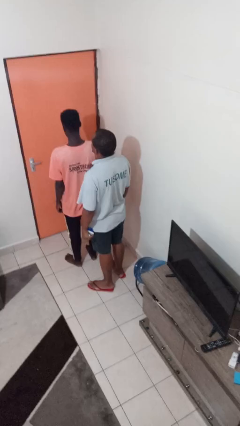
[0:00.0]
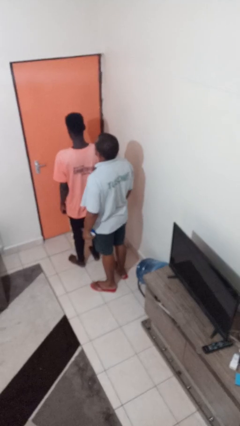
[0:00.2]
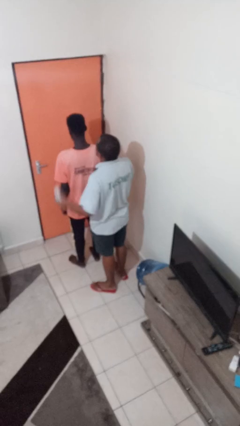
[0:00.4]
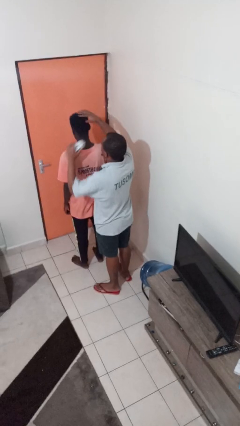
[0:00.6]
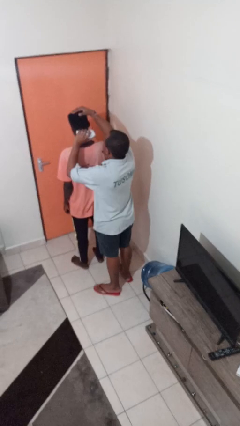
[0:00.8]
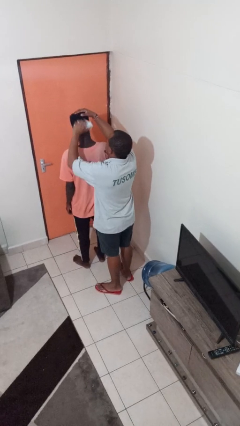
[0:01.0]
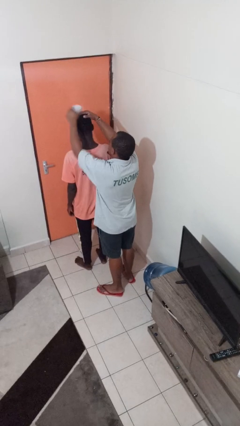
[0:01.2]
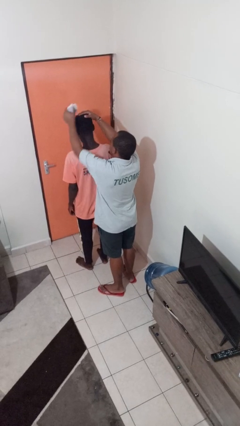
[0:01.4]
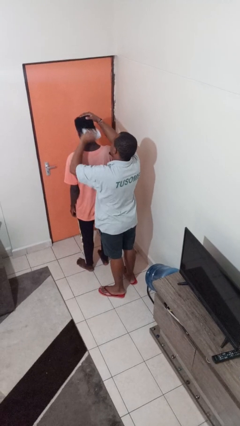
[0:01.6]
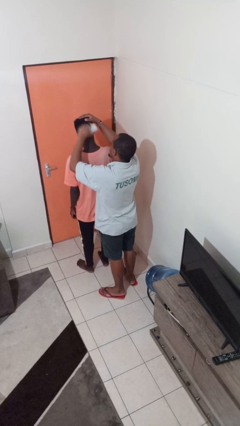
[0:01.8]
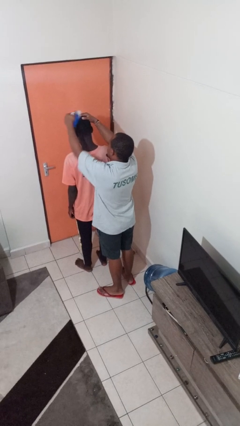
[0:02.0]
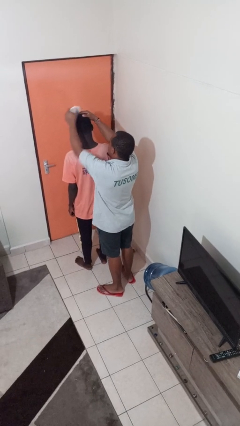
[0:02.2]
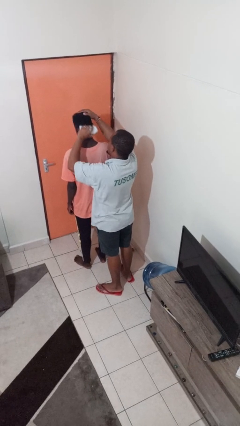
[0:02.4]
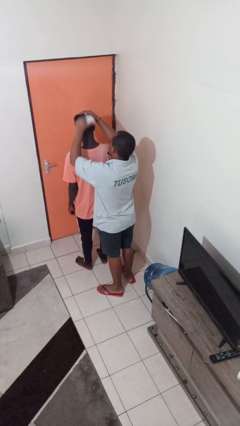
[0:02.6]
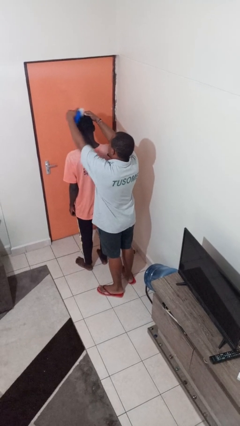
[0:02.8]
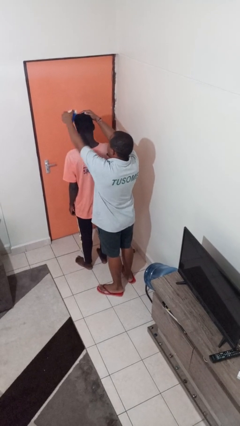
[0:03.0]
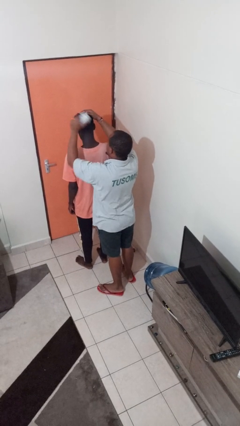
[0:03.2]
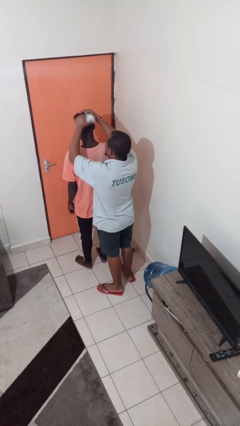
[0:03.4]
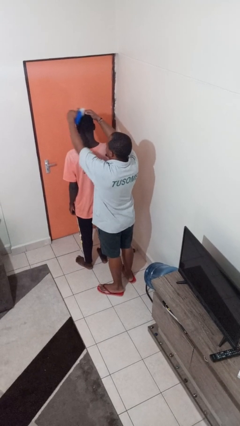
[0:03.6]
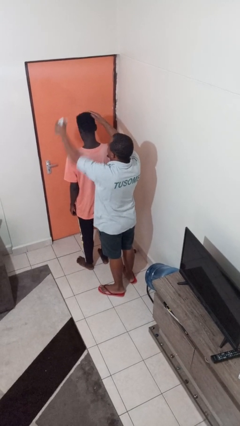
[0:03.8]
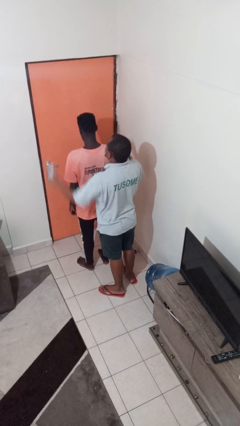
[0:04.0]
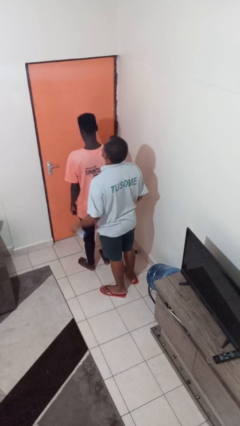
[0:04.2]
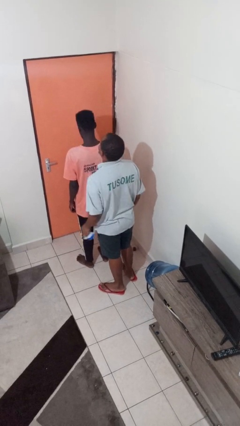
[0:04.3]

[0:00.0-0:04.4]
person brushes hair of person

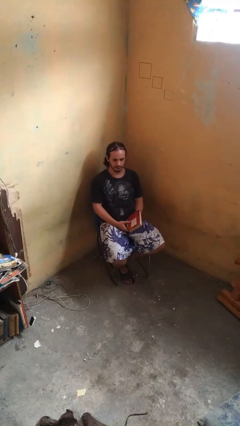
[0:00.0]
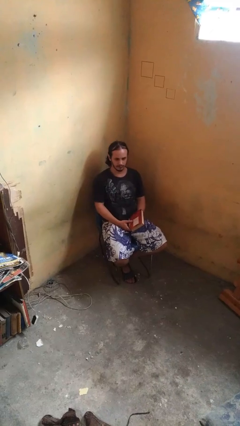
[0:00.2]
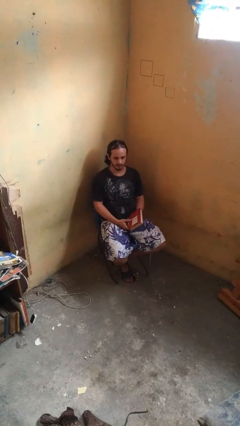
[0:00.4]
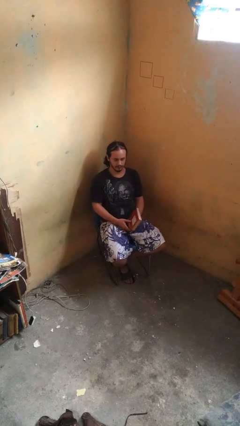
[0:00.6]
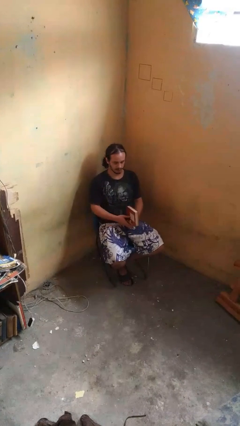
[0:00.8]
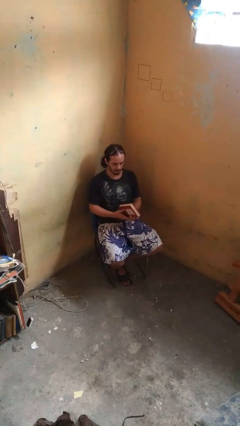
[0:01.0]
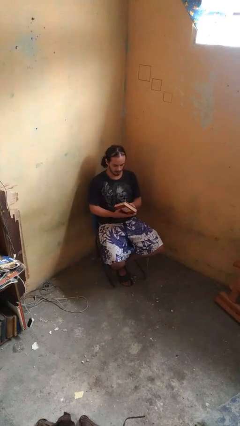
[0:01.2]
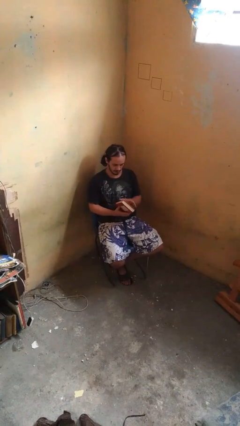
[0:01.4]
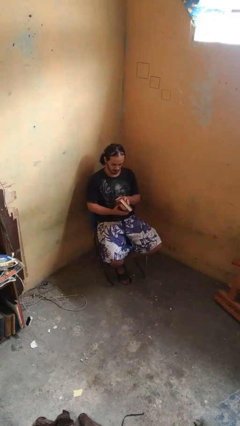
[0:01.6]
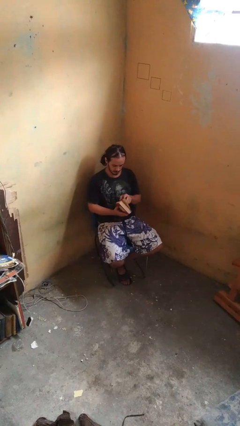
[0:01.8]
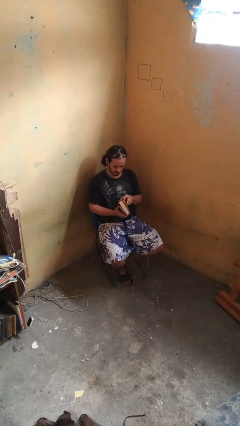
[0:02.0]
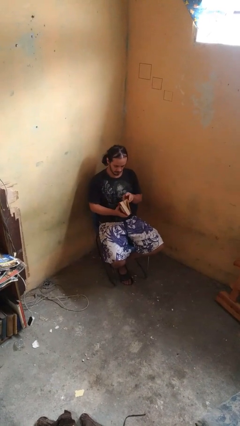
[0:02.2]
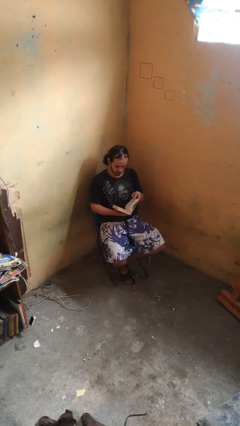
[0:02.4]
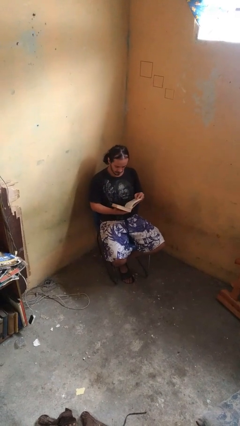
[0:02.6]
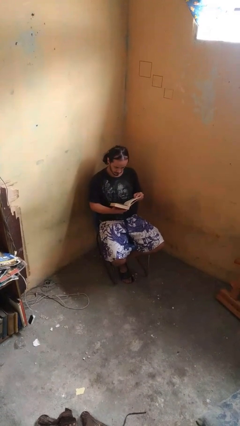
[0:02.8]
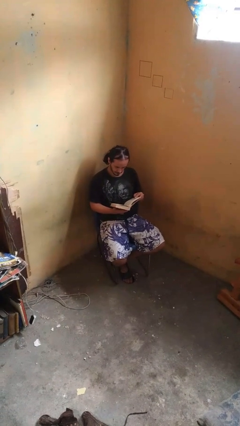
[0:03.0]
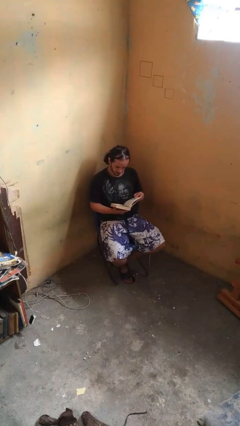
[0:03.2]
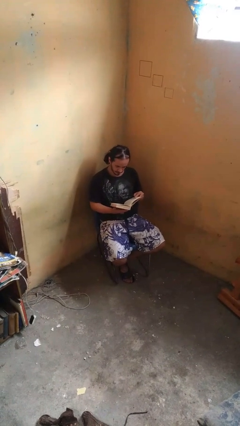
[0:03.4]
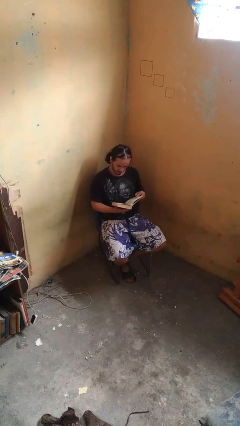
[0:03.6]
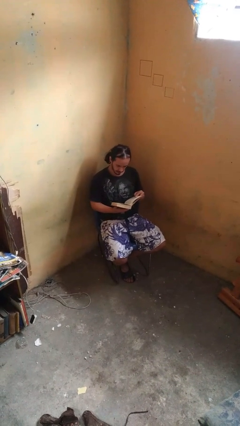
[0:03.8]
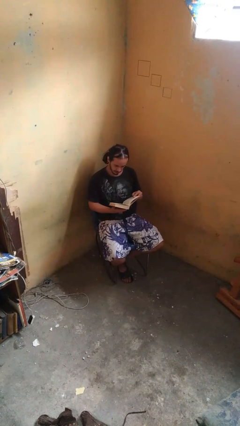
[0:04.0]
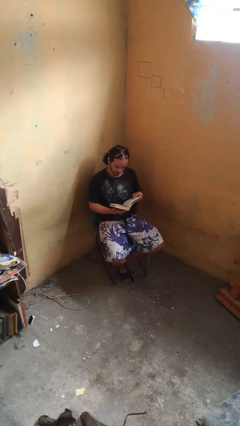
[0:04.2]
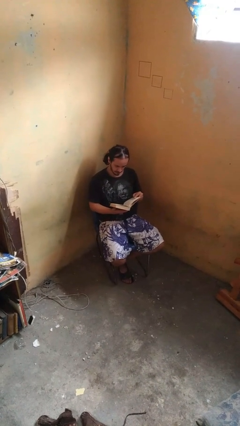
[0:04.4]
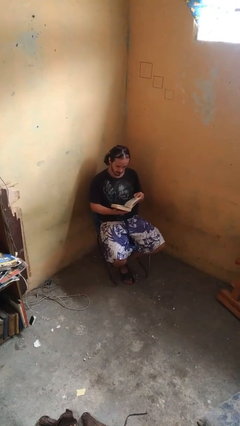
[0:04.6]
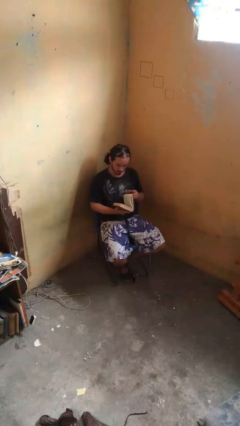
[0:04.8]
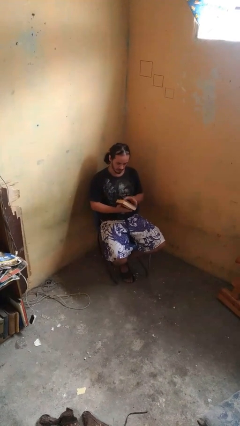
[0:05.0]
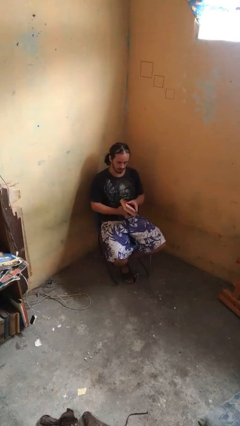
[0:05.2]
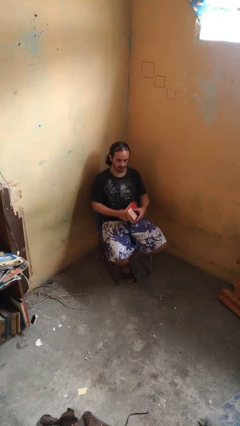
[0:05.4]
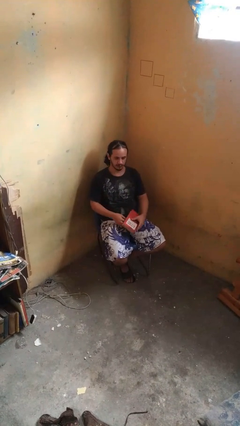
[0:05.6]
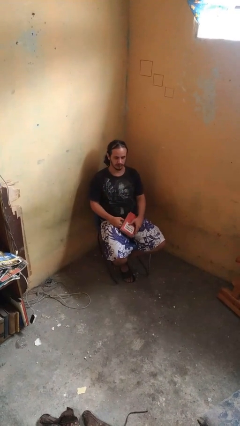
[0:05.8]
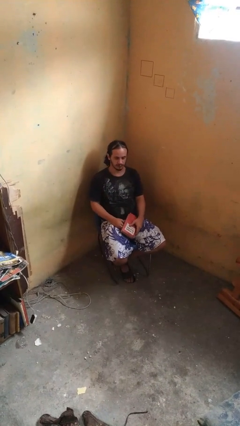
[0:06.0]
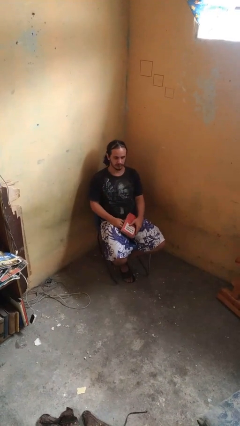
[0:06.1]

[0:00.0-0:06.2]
person reads book

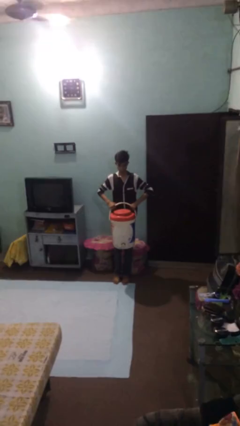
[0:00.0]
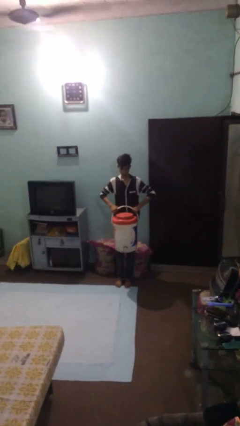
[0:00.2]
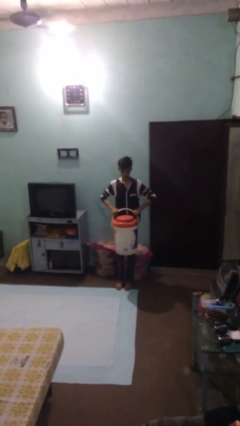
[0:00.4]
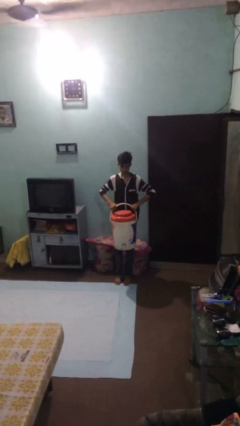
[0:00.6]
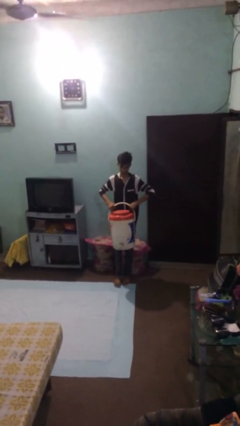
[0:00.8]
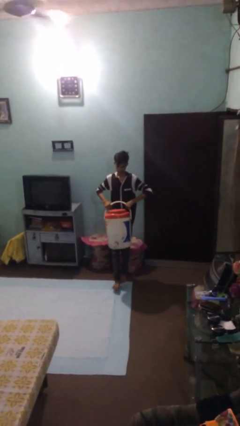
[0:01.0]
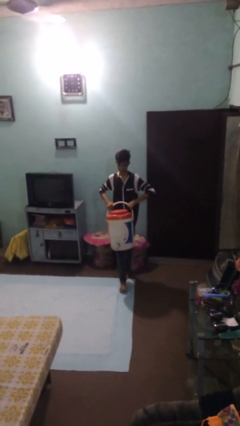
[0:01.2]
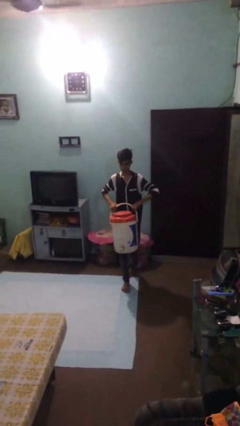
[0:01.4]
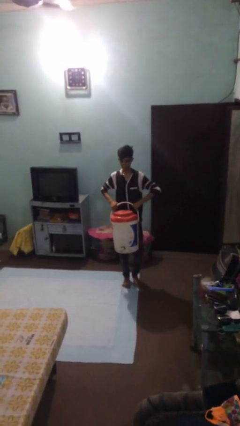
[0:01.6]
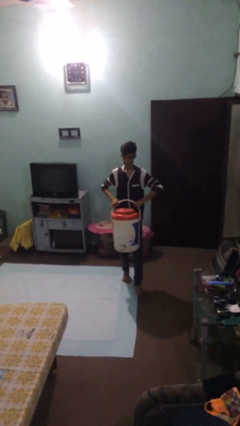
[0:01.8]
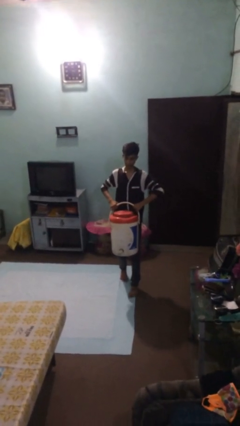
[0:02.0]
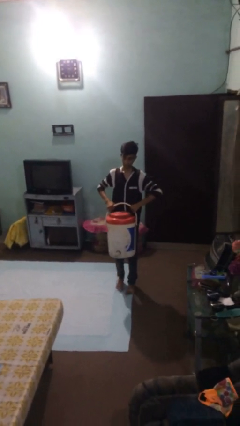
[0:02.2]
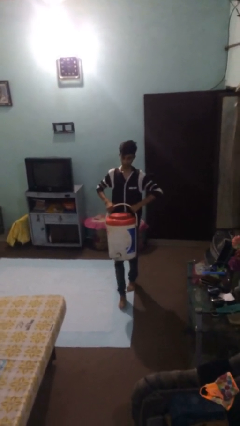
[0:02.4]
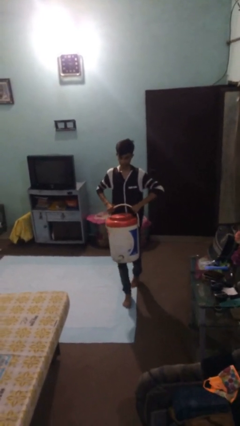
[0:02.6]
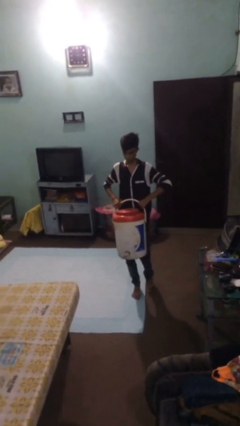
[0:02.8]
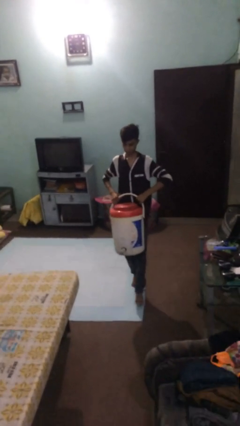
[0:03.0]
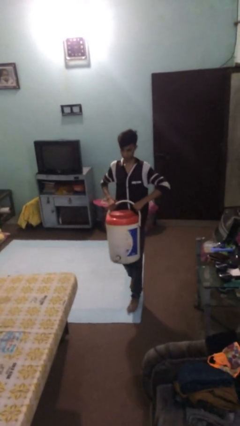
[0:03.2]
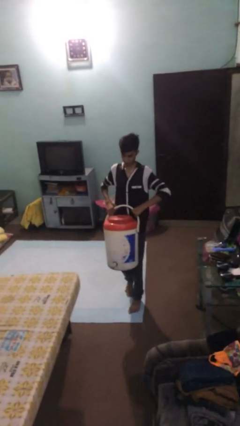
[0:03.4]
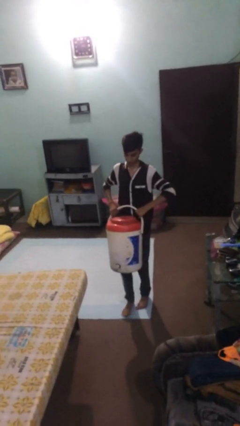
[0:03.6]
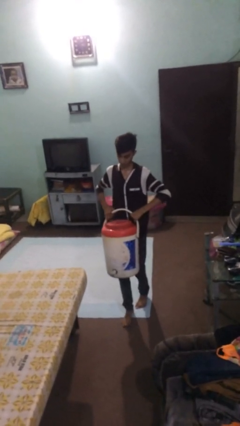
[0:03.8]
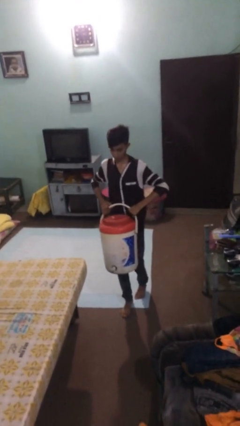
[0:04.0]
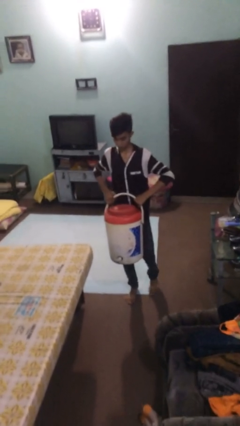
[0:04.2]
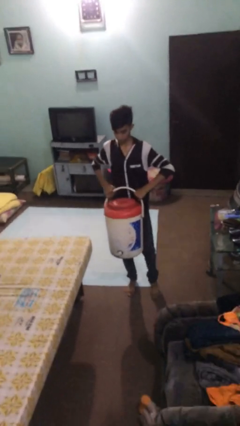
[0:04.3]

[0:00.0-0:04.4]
person carries heavy object

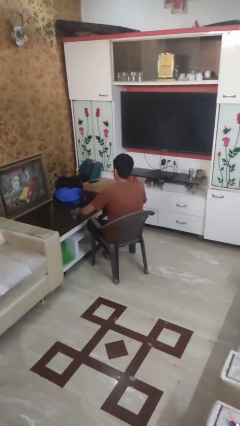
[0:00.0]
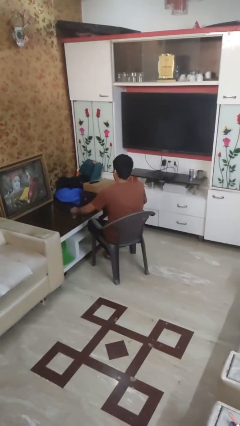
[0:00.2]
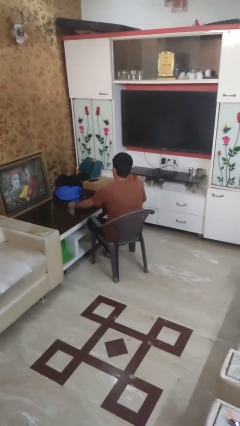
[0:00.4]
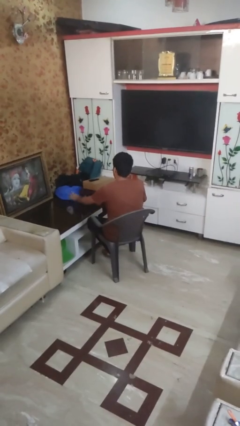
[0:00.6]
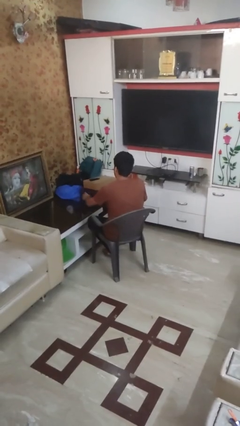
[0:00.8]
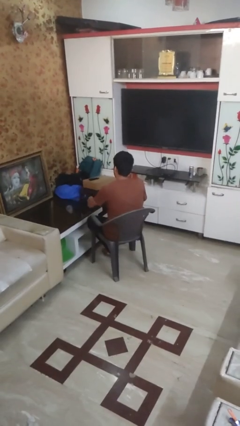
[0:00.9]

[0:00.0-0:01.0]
person knocks over glass

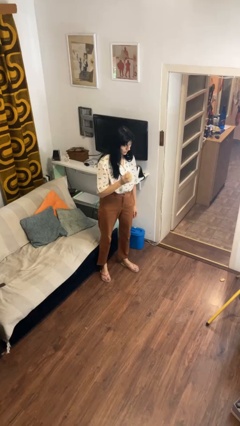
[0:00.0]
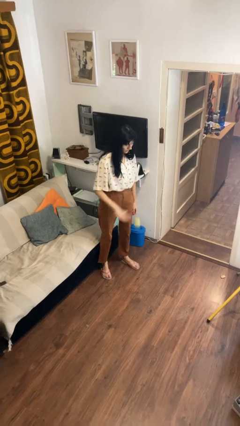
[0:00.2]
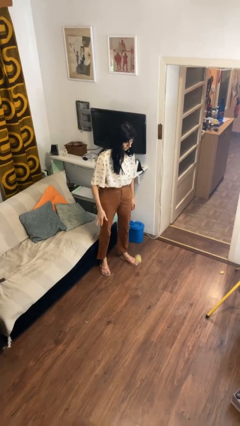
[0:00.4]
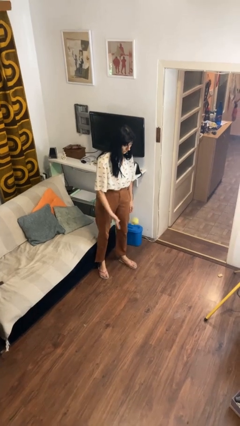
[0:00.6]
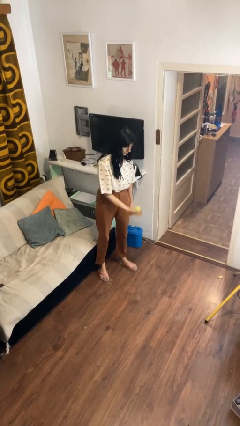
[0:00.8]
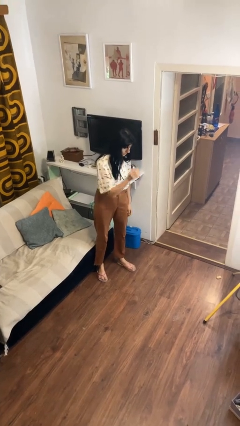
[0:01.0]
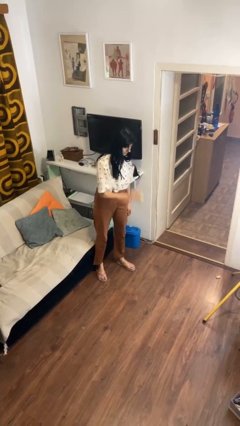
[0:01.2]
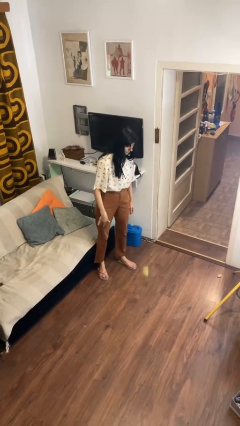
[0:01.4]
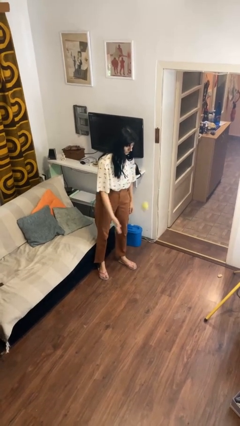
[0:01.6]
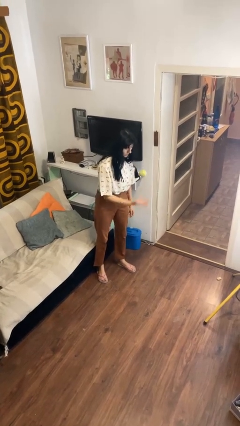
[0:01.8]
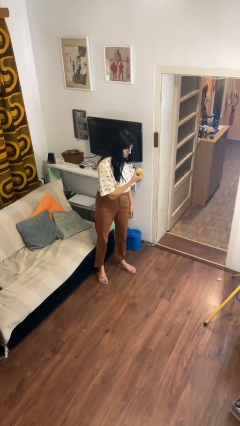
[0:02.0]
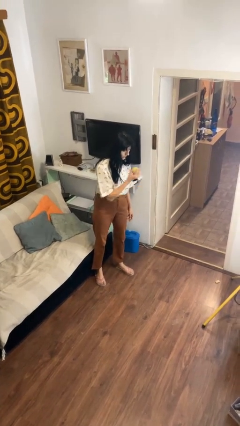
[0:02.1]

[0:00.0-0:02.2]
person bounces ball on floor
